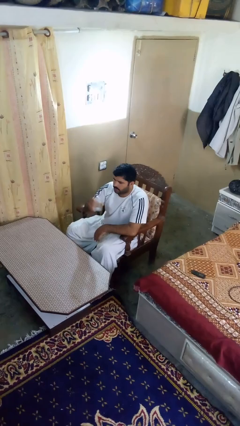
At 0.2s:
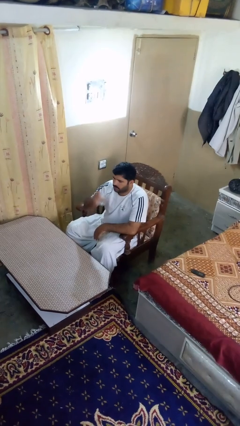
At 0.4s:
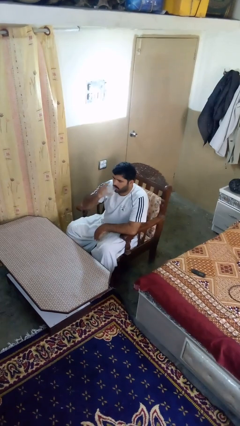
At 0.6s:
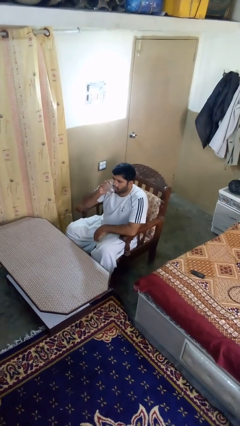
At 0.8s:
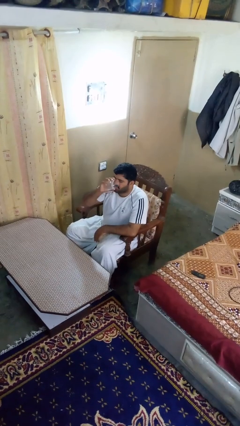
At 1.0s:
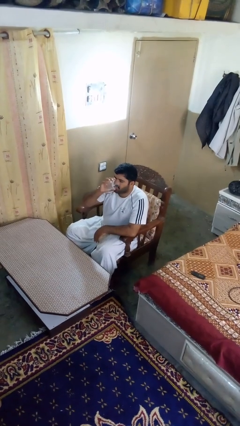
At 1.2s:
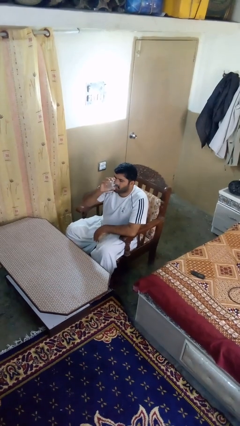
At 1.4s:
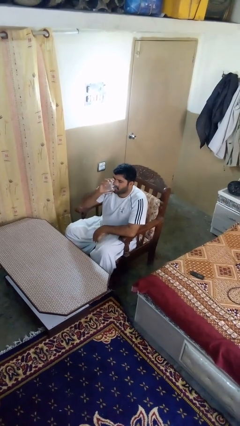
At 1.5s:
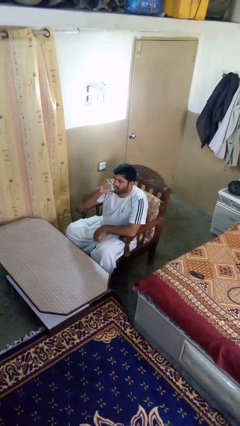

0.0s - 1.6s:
person drinks from shotglass

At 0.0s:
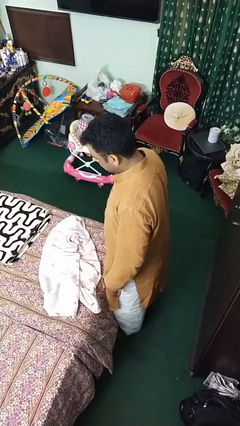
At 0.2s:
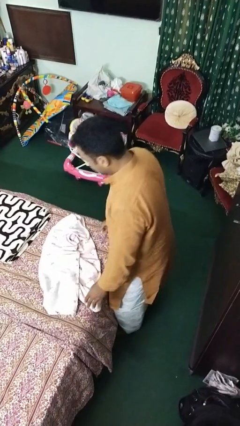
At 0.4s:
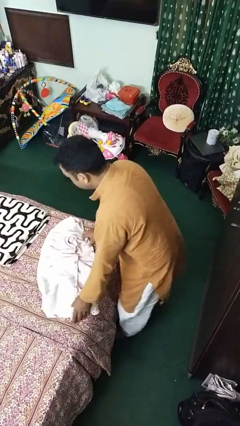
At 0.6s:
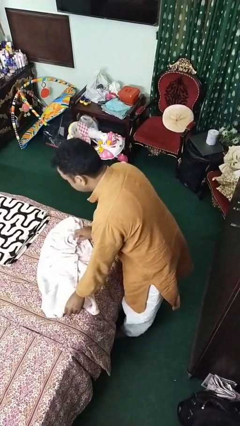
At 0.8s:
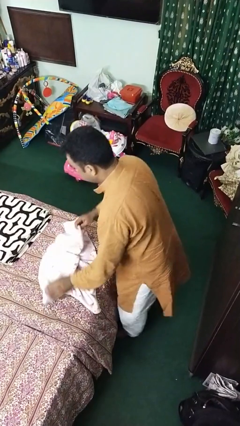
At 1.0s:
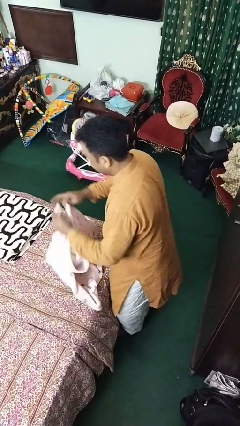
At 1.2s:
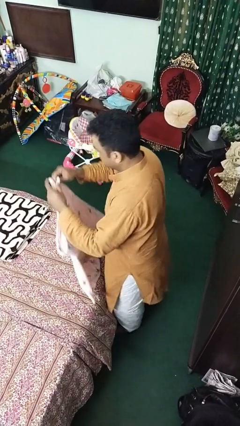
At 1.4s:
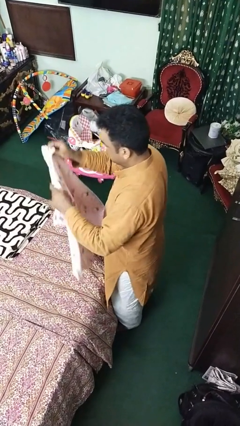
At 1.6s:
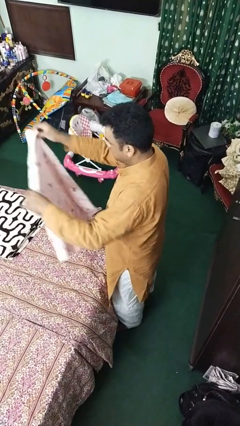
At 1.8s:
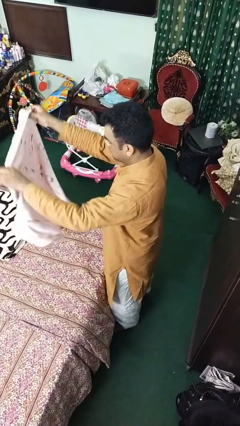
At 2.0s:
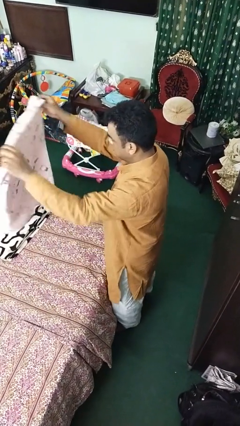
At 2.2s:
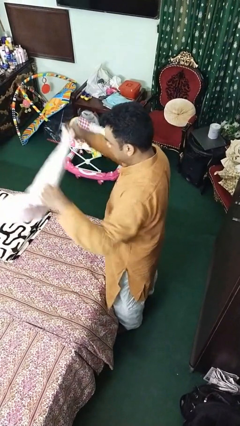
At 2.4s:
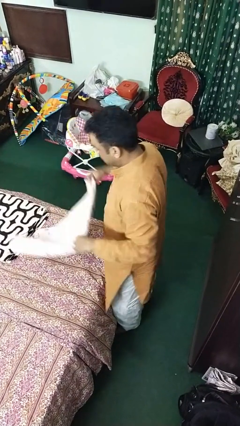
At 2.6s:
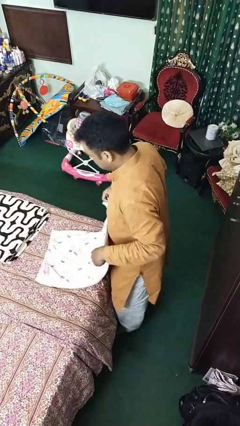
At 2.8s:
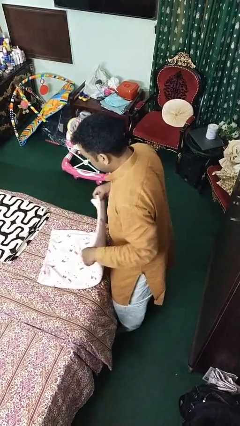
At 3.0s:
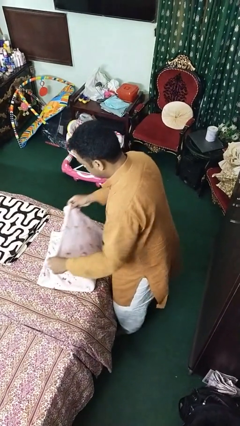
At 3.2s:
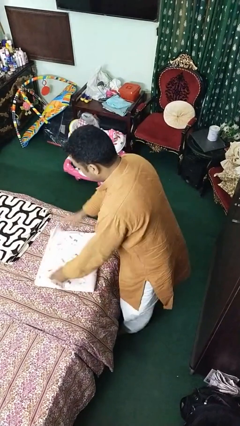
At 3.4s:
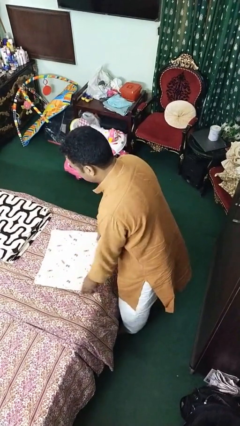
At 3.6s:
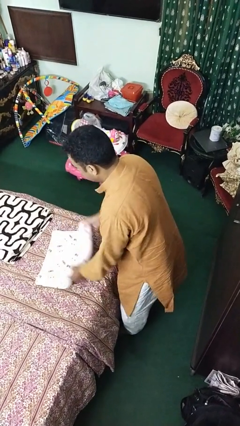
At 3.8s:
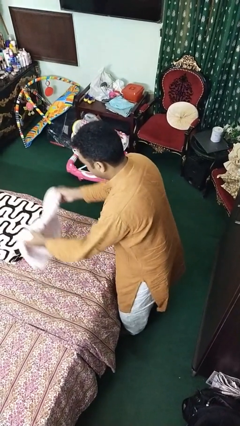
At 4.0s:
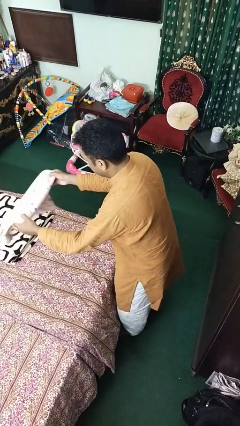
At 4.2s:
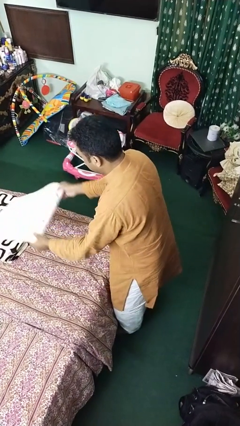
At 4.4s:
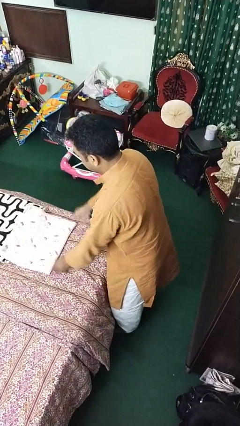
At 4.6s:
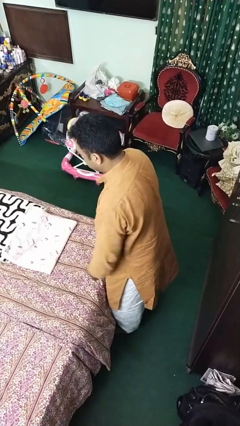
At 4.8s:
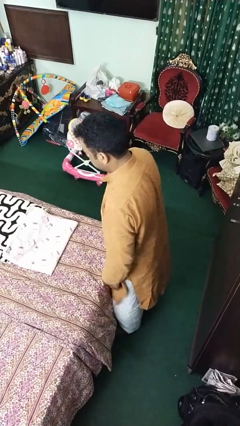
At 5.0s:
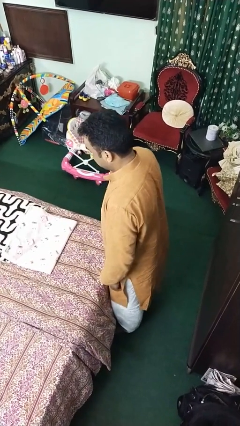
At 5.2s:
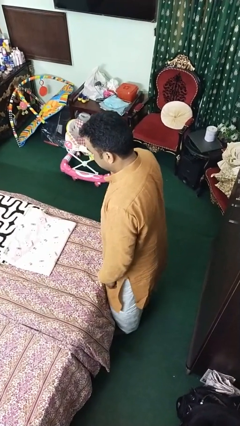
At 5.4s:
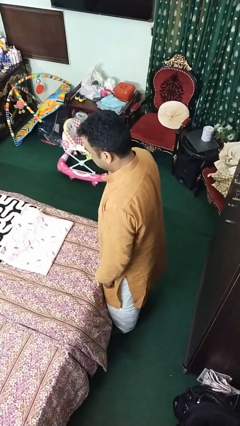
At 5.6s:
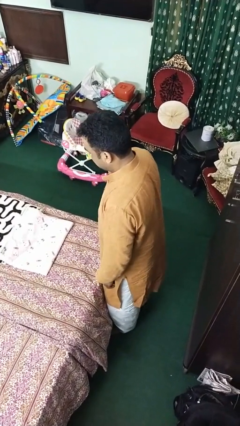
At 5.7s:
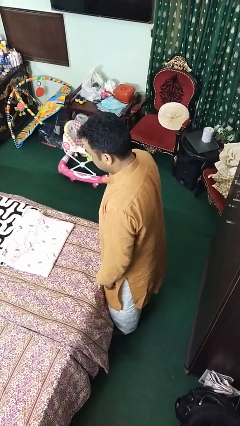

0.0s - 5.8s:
person folds blanket

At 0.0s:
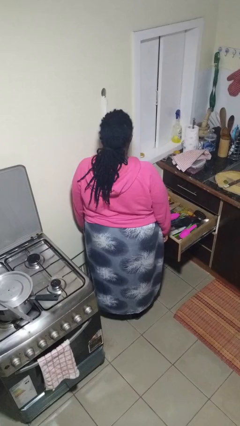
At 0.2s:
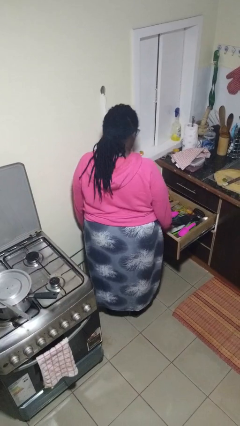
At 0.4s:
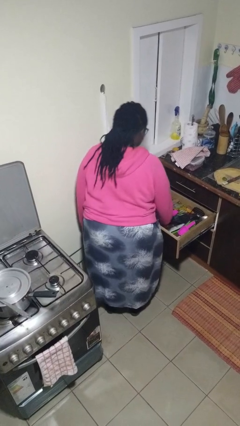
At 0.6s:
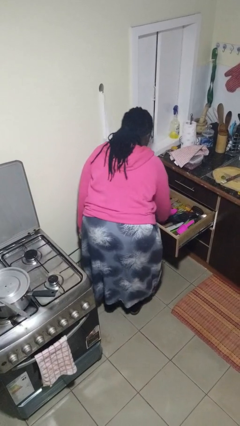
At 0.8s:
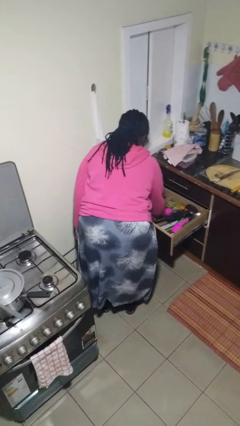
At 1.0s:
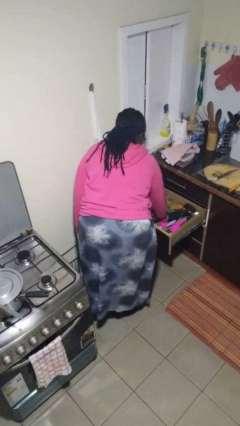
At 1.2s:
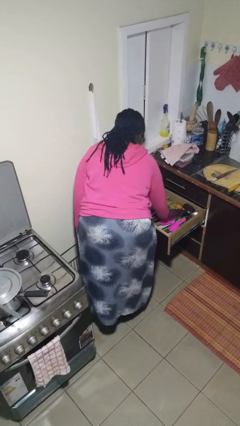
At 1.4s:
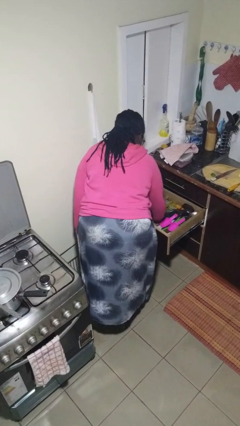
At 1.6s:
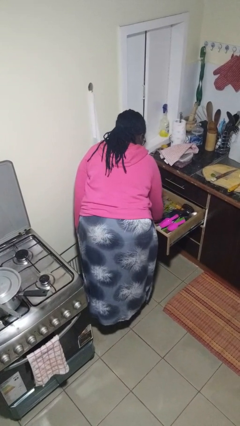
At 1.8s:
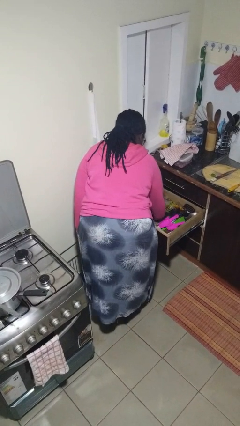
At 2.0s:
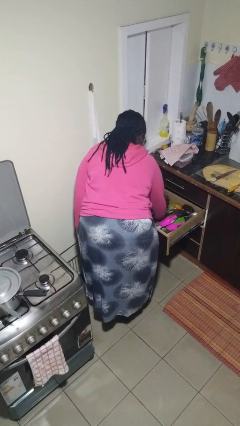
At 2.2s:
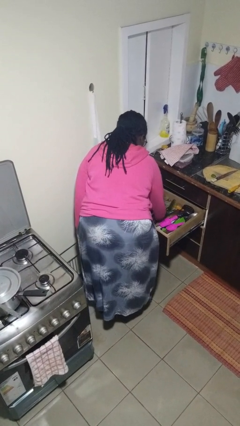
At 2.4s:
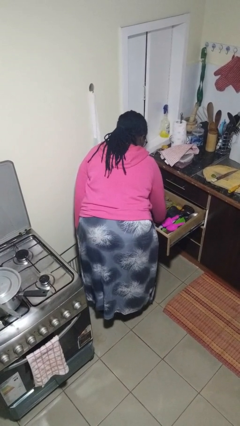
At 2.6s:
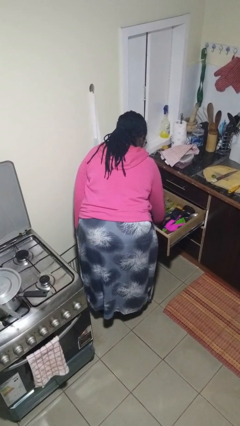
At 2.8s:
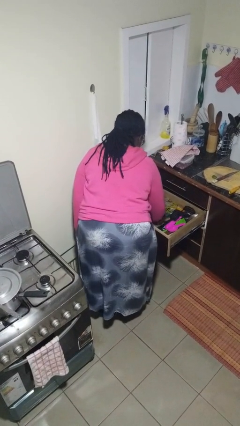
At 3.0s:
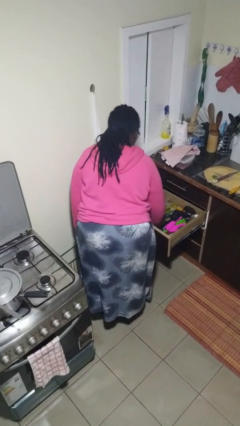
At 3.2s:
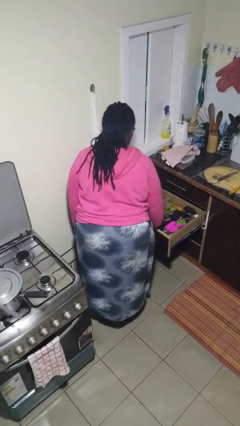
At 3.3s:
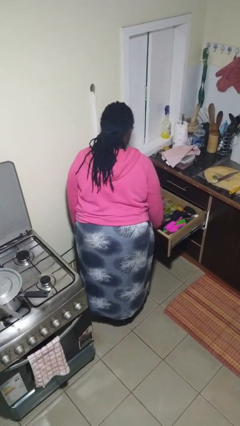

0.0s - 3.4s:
person searches in kitchen drawer

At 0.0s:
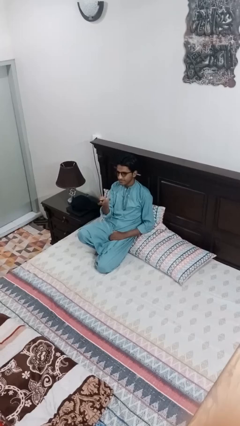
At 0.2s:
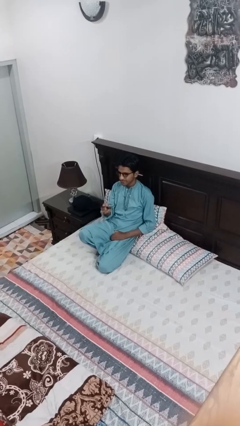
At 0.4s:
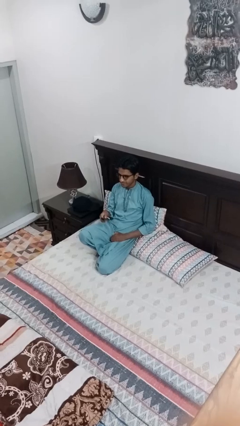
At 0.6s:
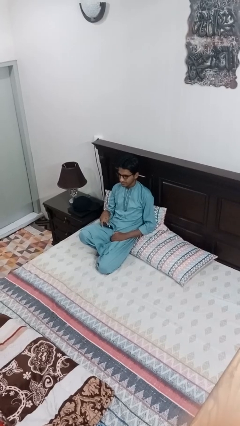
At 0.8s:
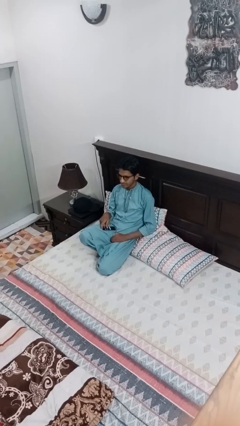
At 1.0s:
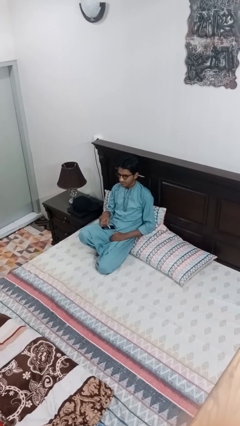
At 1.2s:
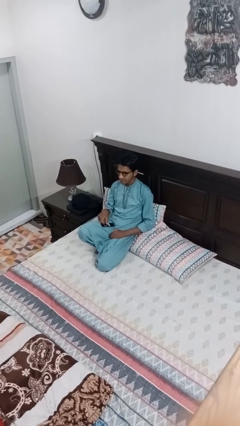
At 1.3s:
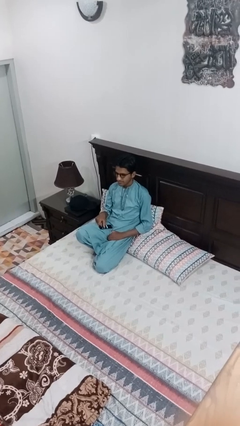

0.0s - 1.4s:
person uses television remote

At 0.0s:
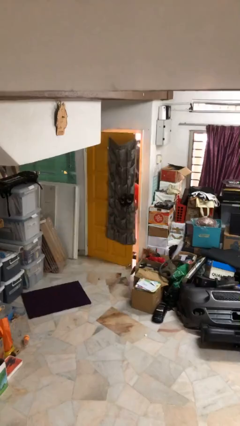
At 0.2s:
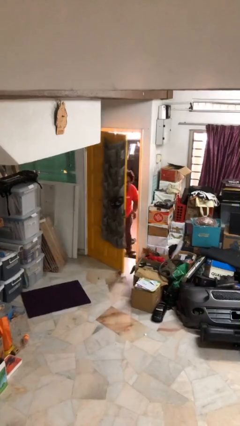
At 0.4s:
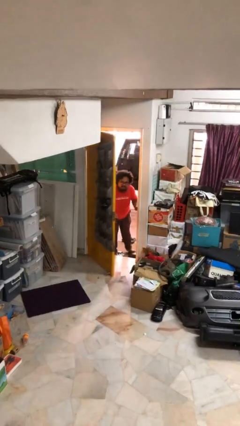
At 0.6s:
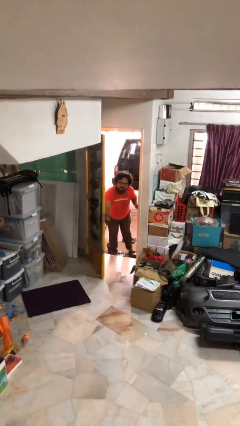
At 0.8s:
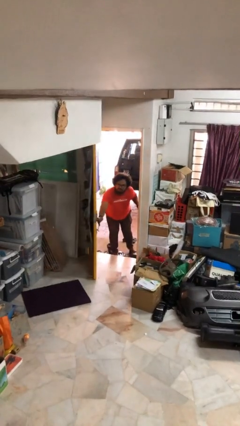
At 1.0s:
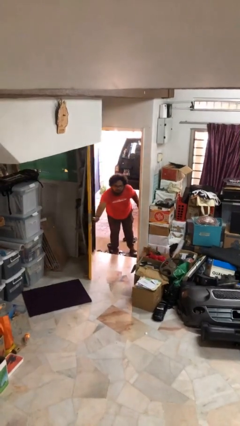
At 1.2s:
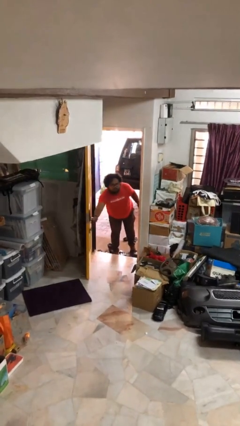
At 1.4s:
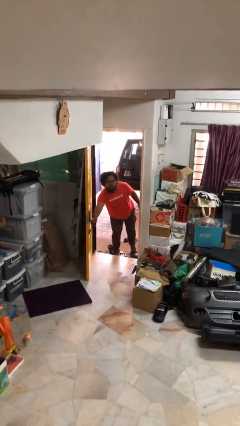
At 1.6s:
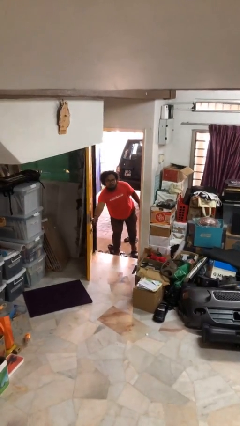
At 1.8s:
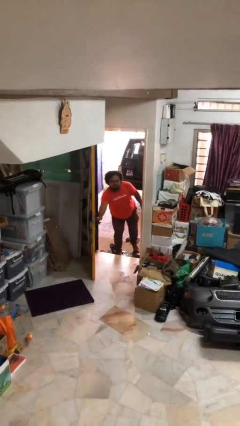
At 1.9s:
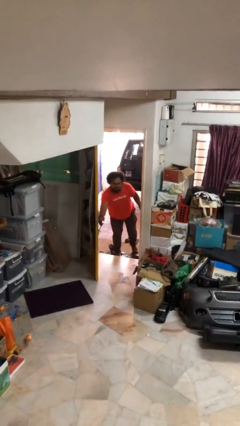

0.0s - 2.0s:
person opens facility door

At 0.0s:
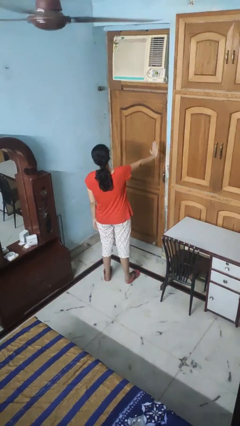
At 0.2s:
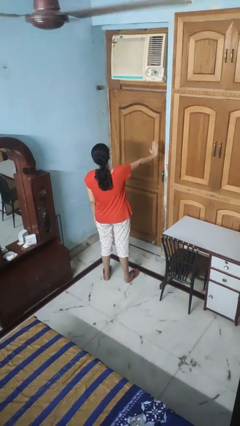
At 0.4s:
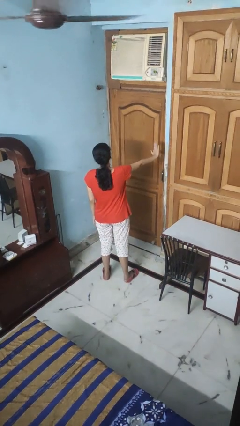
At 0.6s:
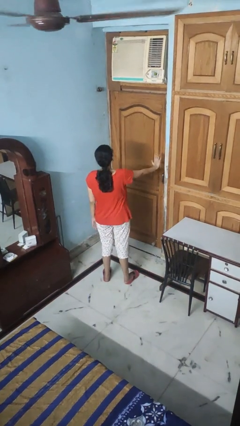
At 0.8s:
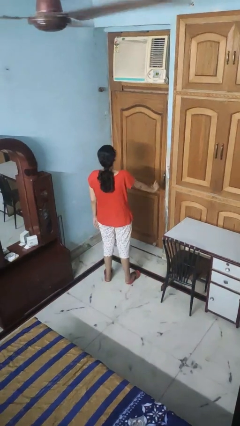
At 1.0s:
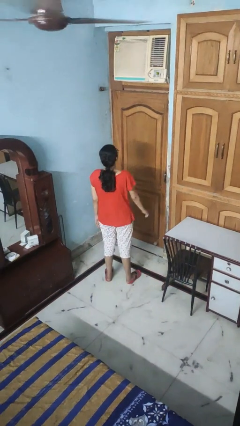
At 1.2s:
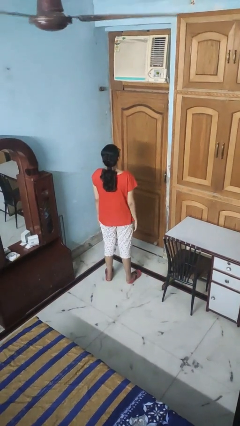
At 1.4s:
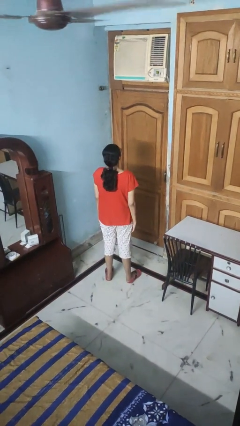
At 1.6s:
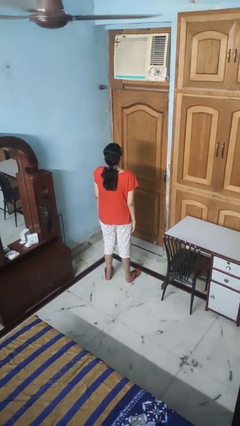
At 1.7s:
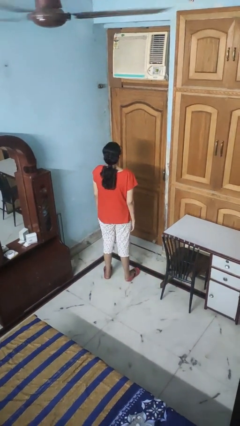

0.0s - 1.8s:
person gestures stop

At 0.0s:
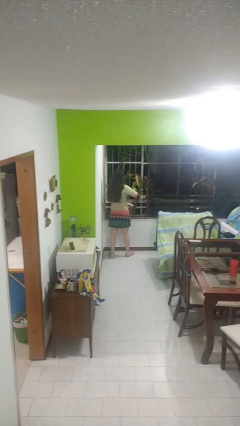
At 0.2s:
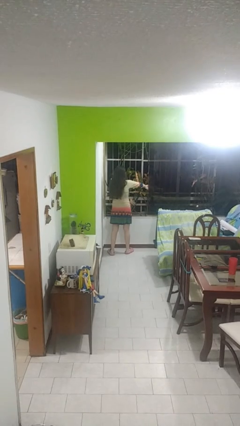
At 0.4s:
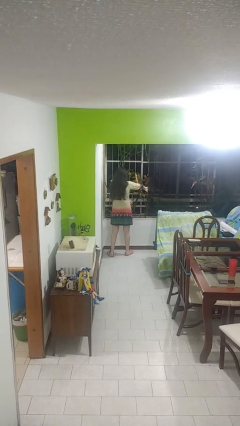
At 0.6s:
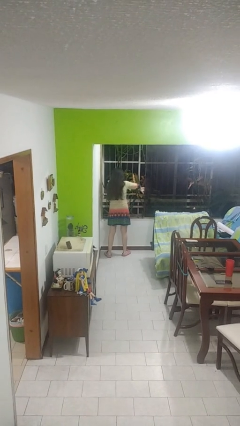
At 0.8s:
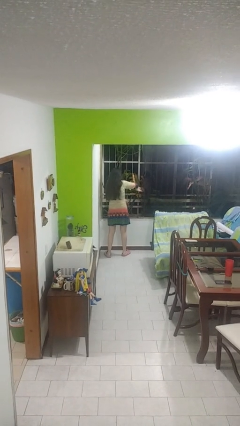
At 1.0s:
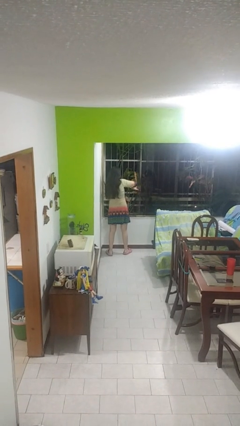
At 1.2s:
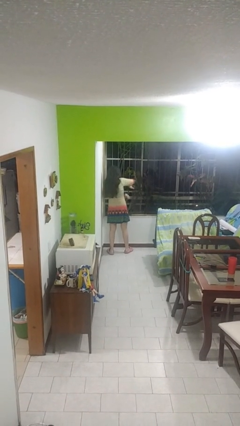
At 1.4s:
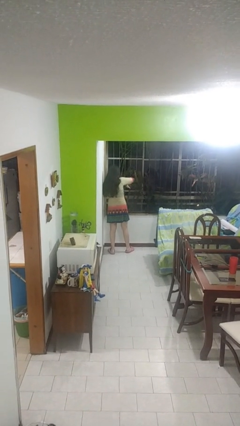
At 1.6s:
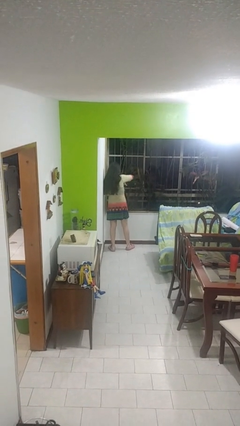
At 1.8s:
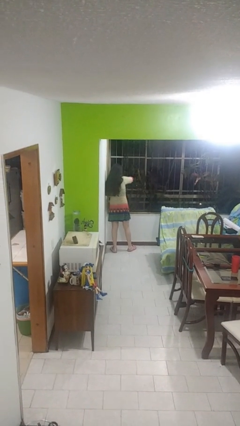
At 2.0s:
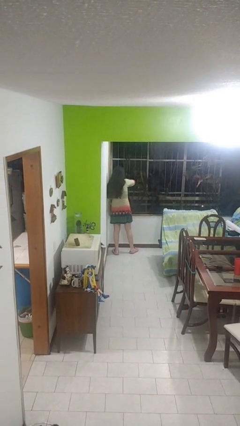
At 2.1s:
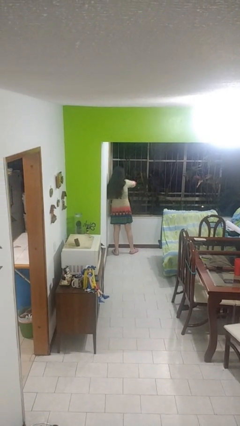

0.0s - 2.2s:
person closes home window
